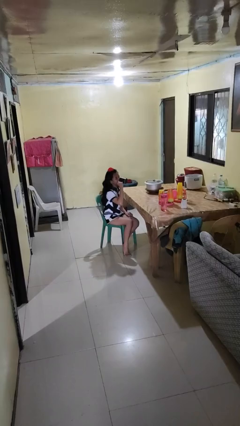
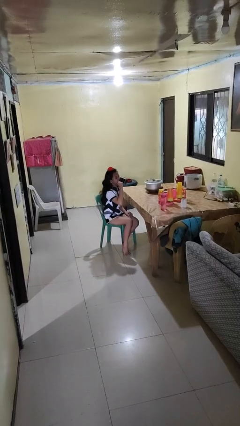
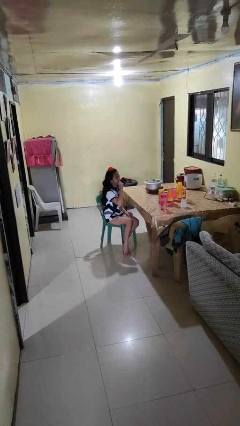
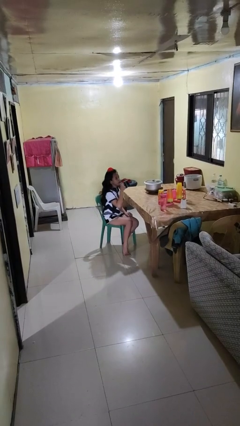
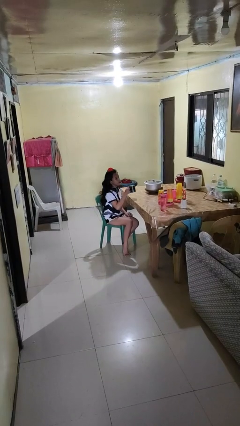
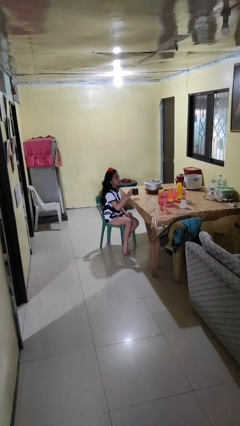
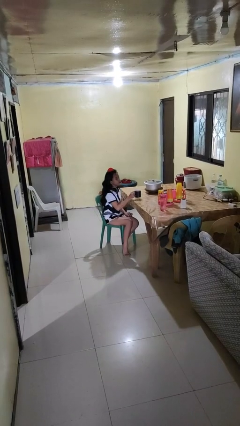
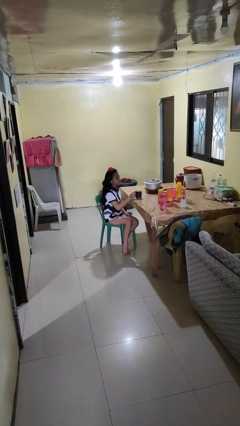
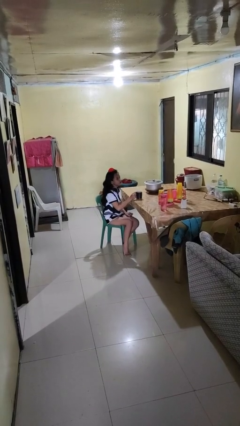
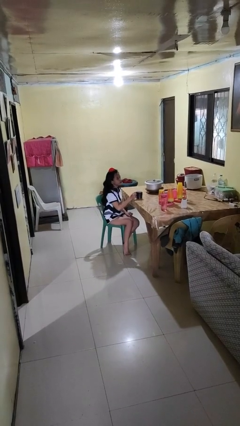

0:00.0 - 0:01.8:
person puts down object on table

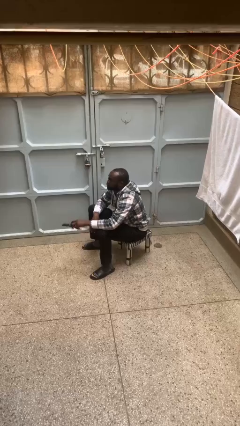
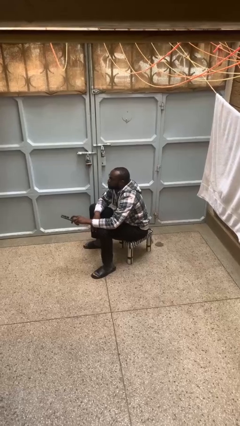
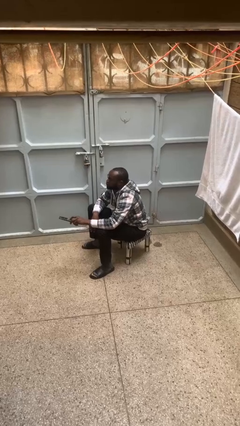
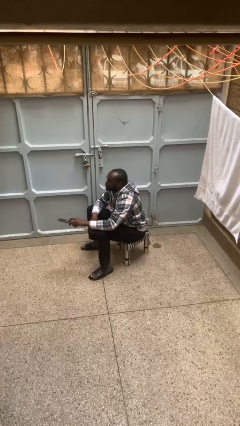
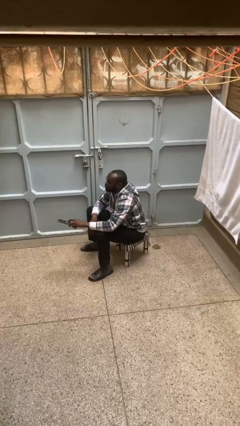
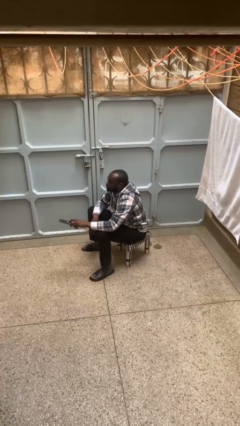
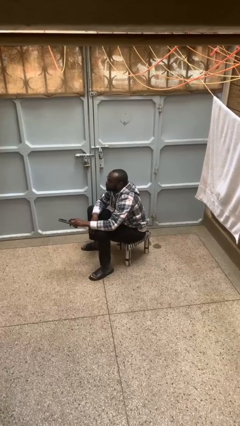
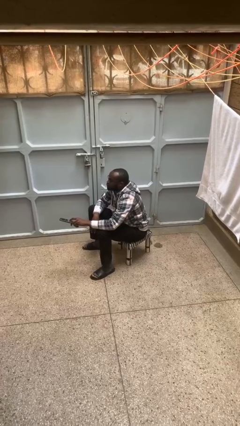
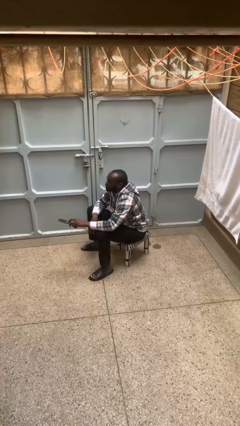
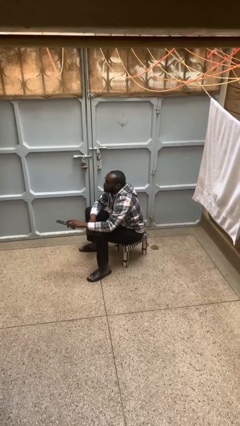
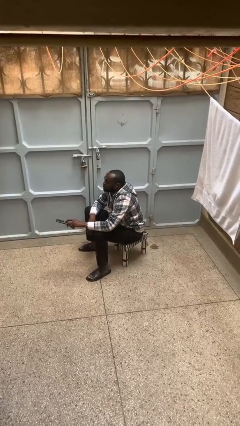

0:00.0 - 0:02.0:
person uses television remote

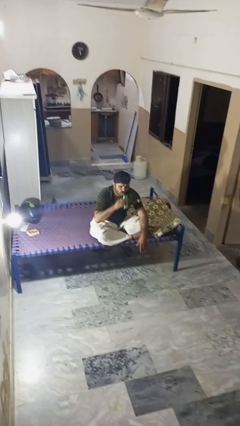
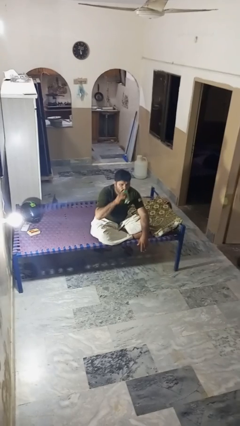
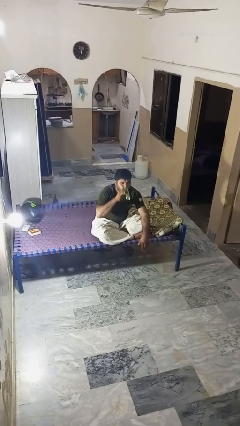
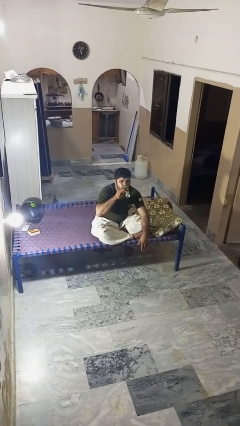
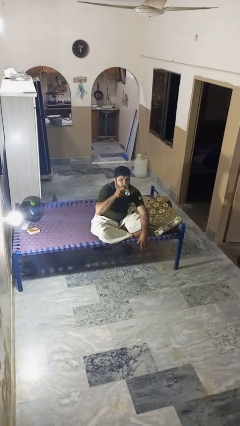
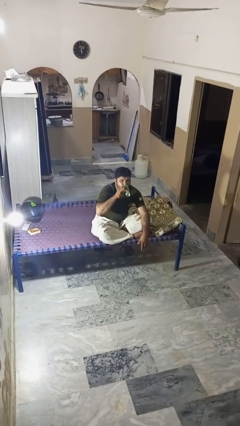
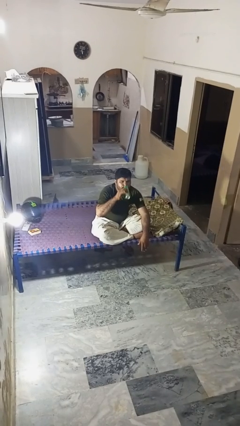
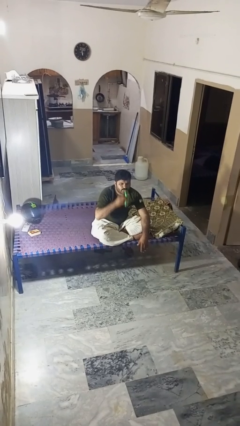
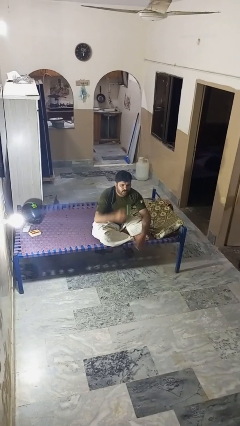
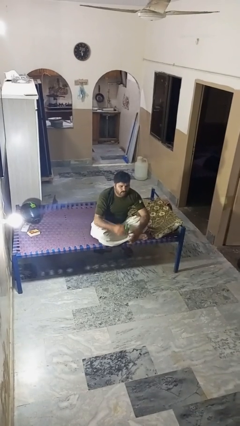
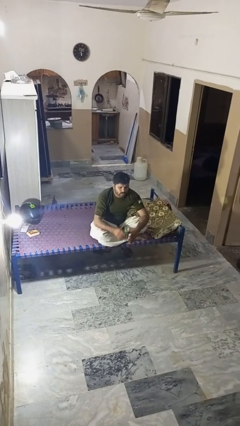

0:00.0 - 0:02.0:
person drinks from beverage can

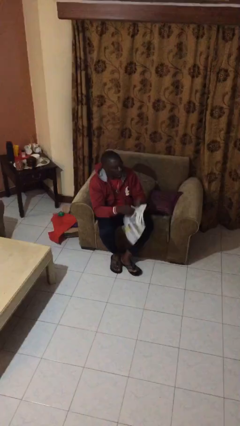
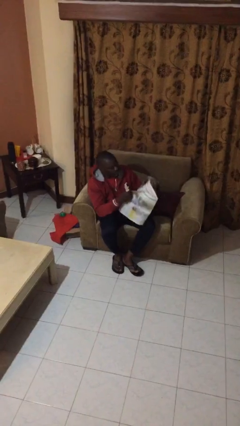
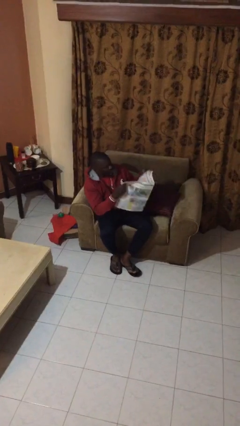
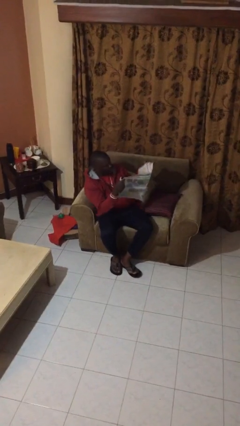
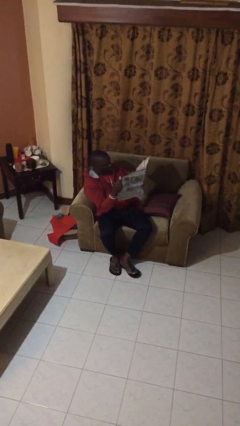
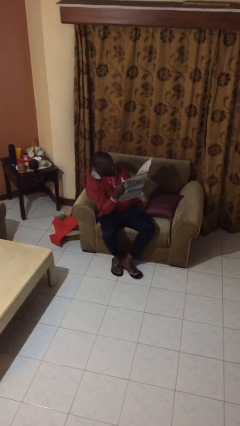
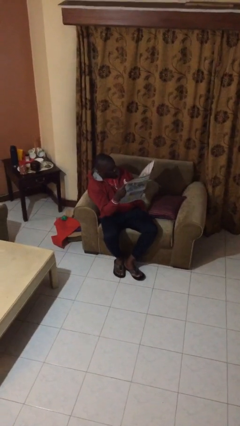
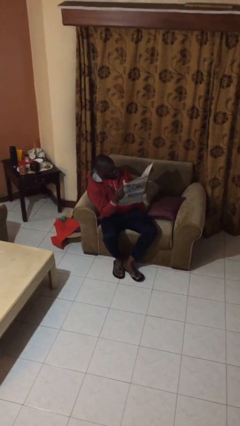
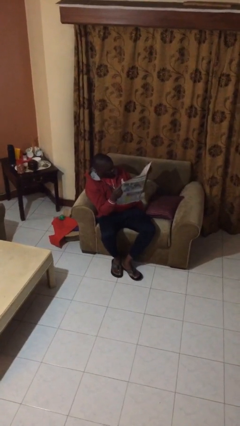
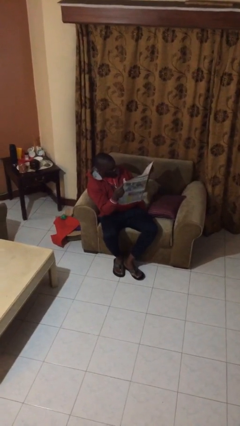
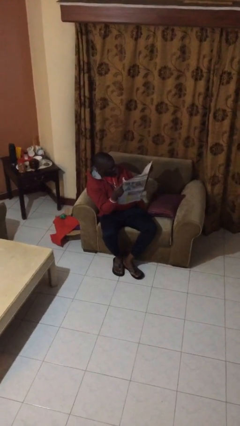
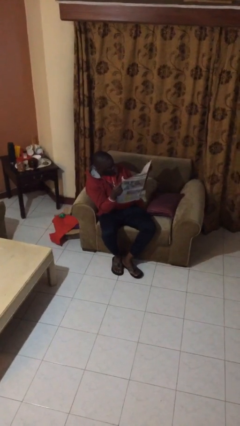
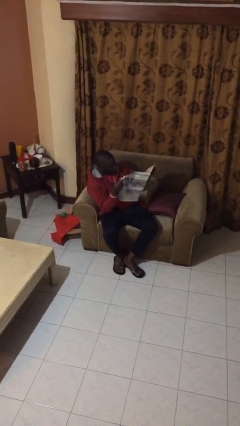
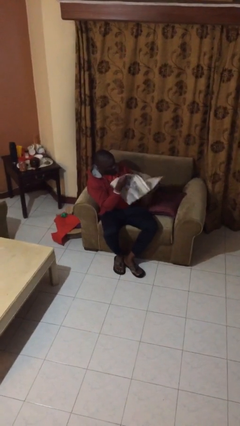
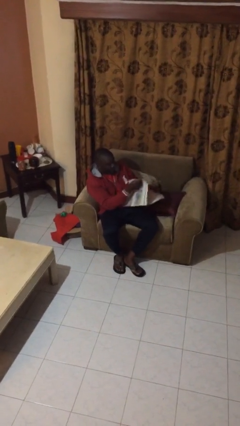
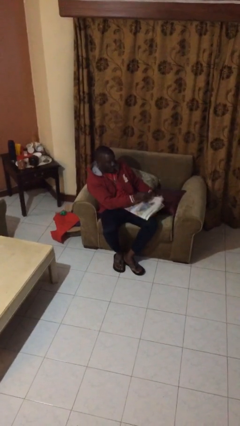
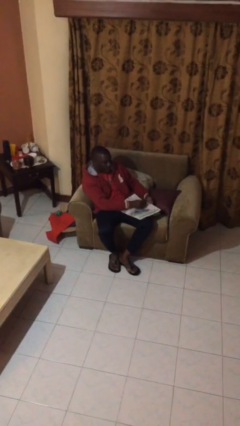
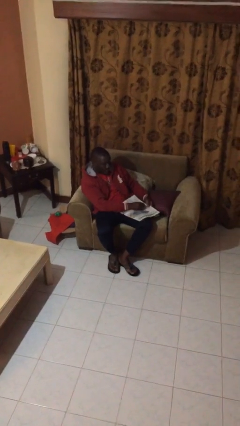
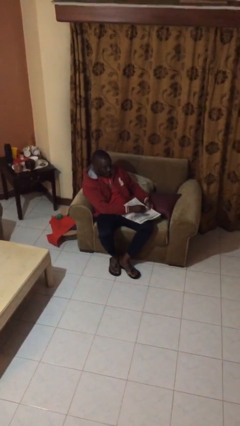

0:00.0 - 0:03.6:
person reads newspaper

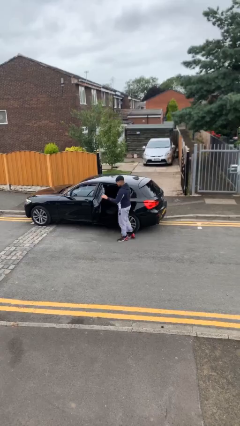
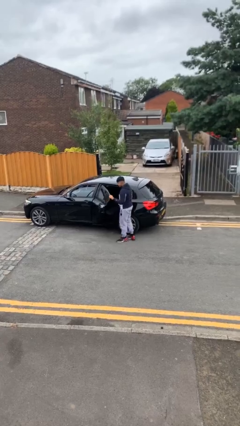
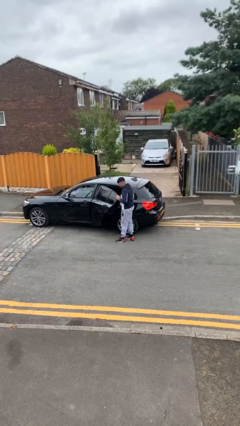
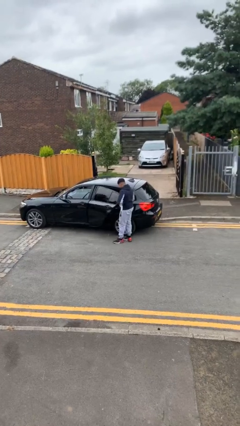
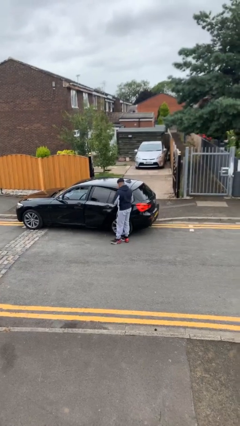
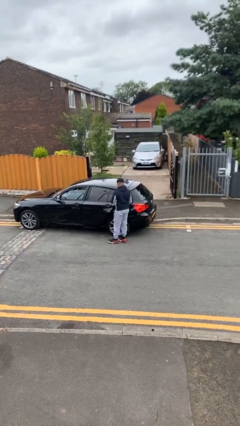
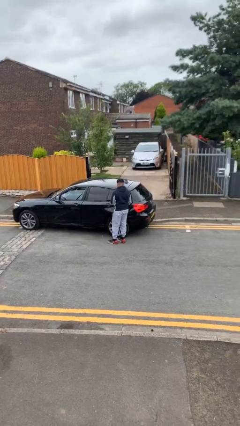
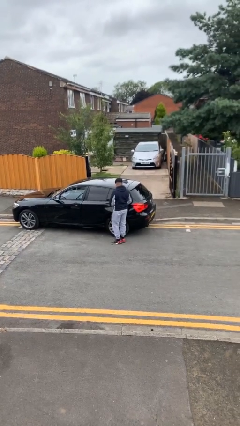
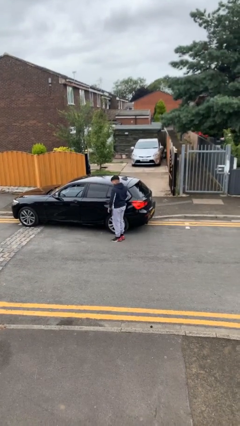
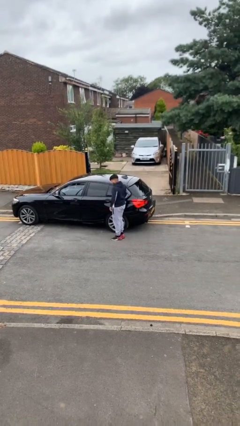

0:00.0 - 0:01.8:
person closes car door

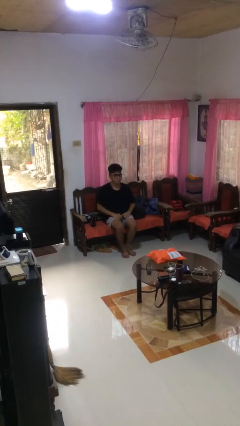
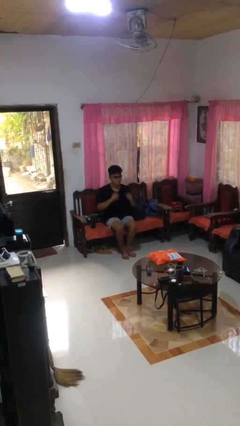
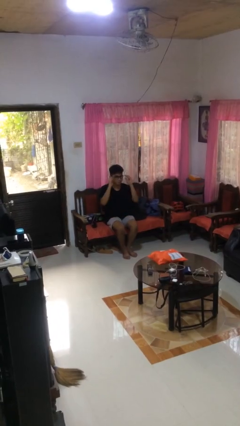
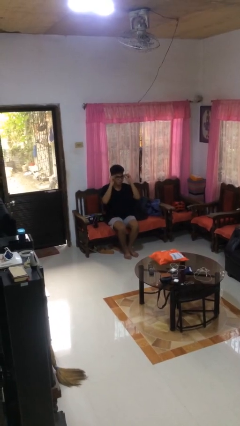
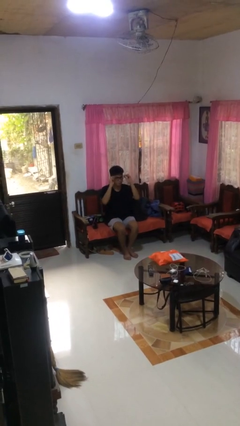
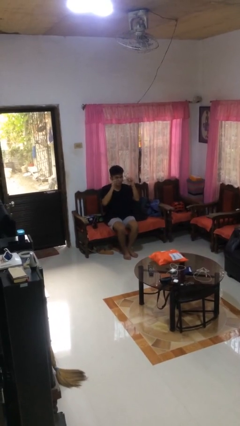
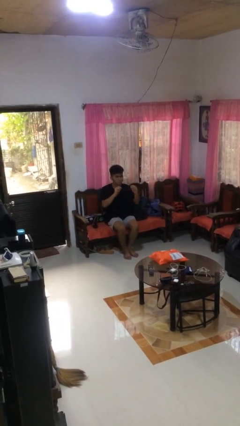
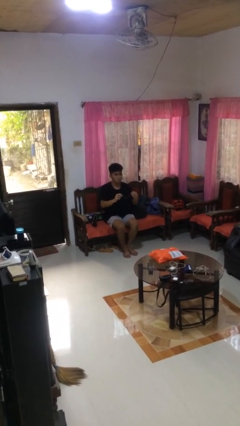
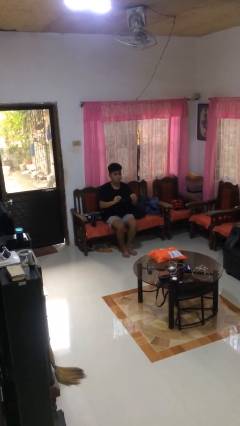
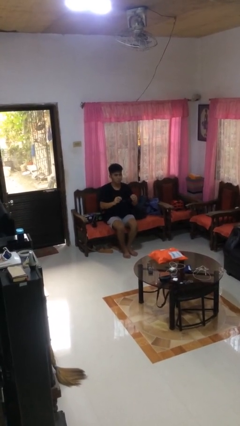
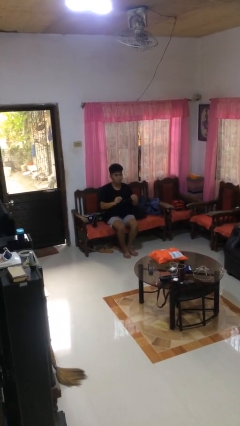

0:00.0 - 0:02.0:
person takes off glasses

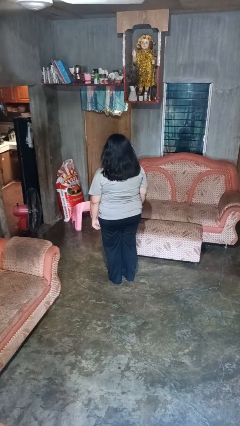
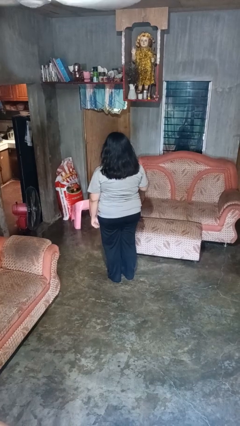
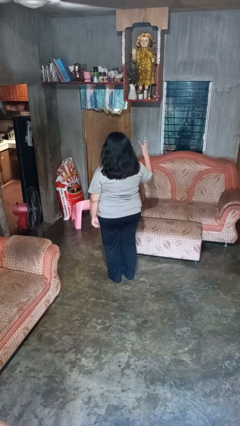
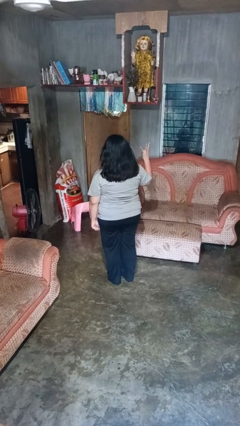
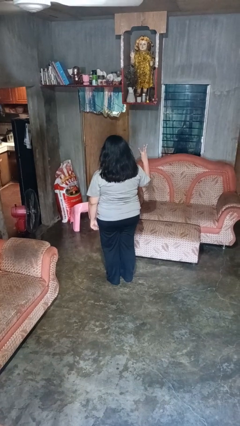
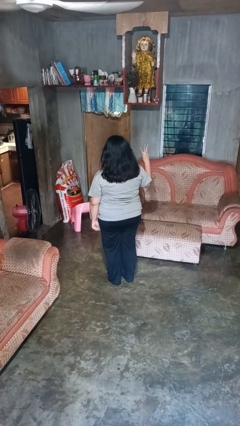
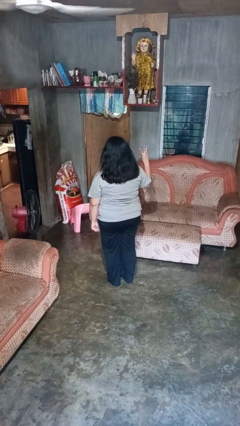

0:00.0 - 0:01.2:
person gestures number three

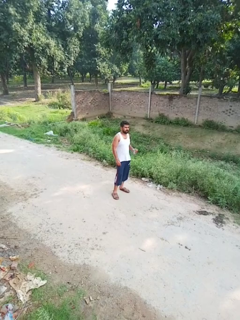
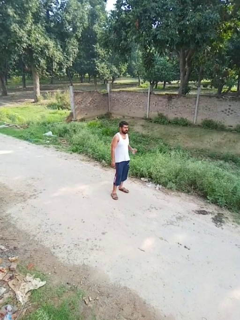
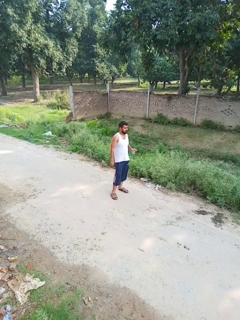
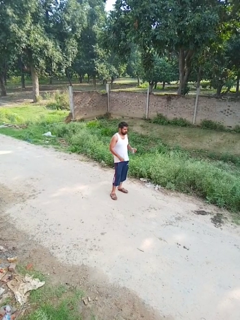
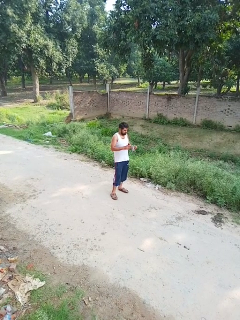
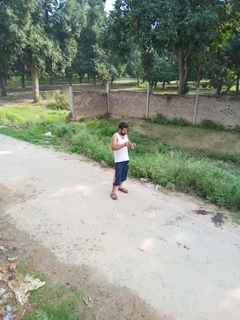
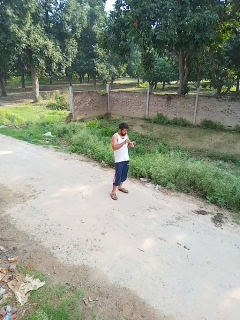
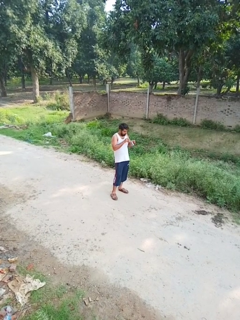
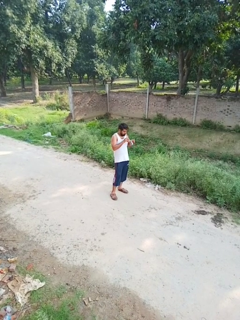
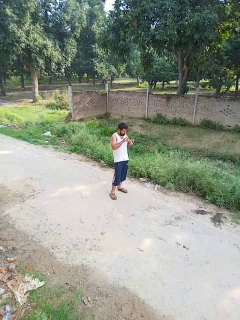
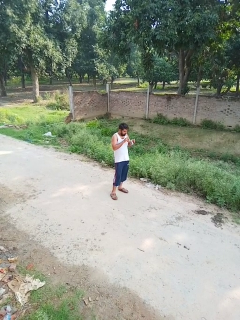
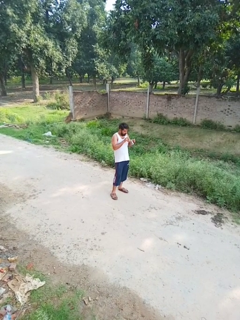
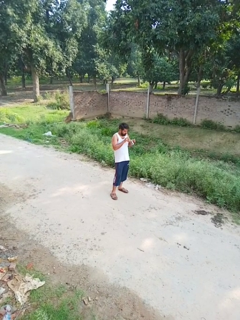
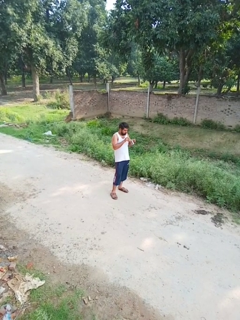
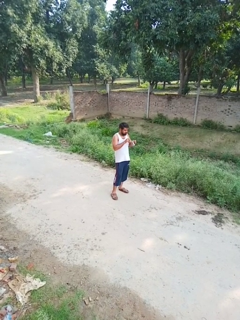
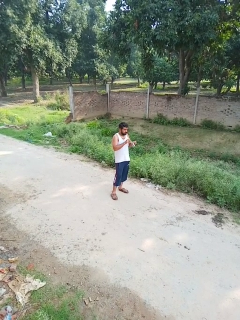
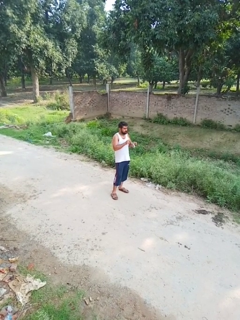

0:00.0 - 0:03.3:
person drinks from straw

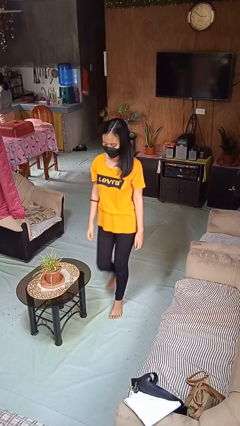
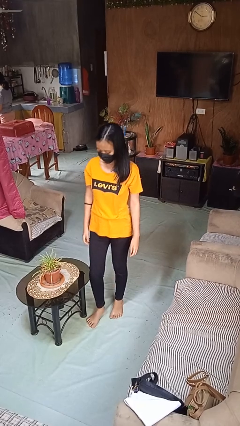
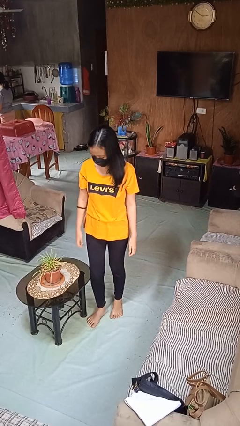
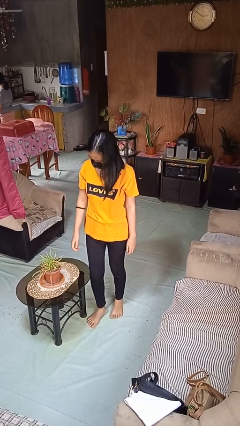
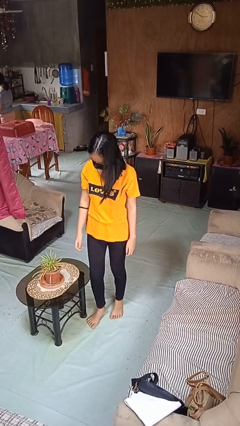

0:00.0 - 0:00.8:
person bumps into table
